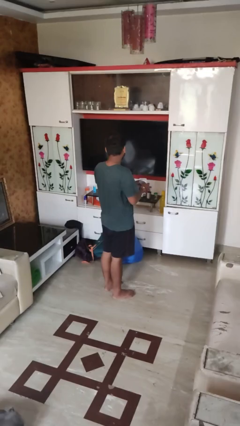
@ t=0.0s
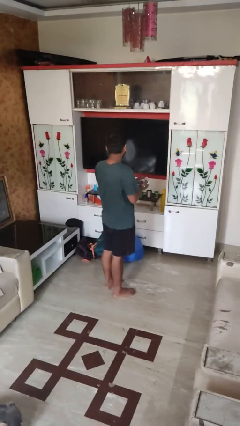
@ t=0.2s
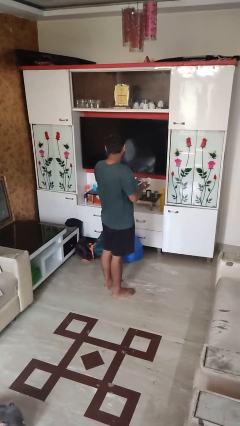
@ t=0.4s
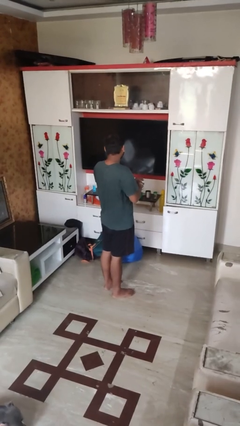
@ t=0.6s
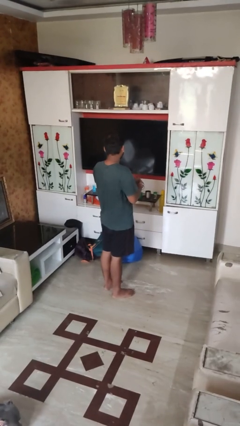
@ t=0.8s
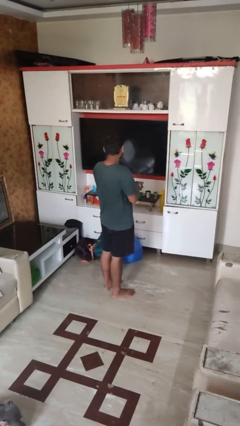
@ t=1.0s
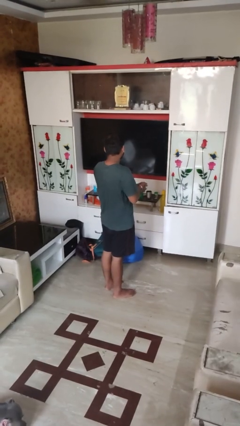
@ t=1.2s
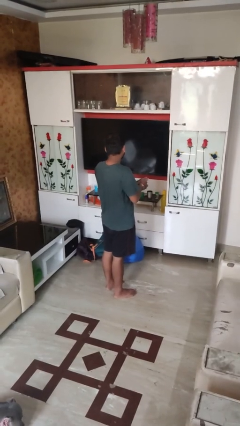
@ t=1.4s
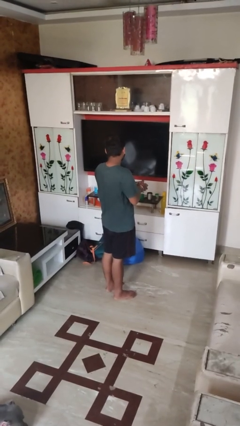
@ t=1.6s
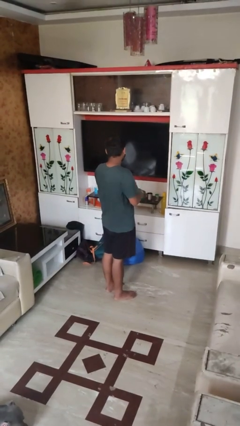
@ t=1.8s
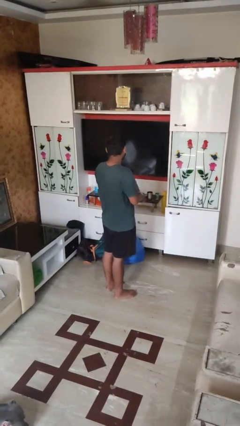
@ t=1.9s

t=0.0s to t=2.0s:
person crumples paper

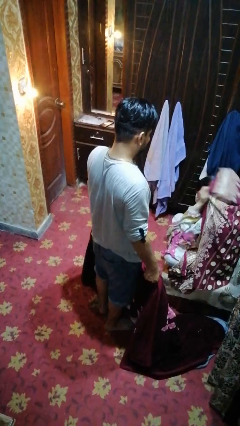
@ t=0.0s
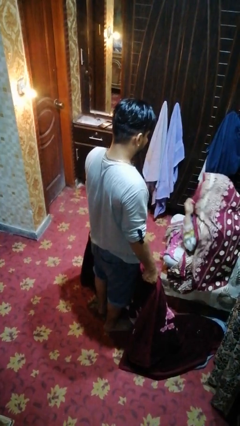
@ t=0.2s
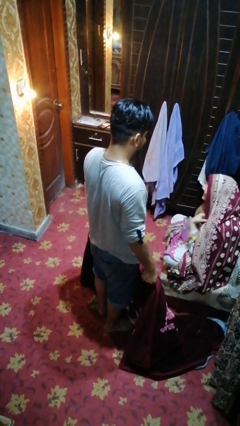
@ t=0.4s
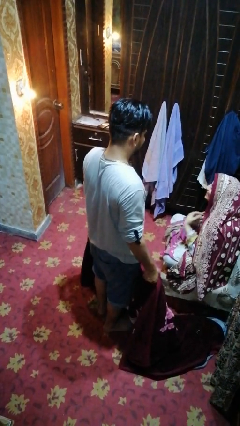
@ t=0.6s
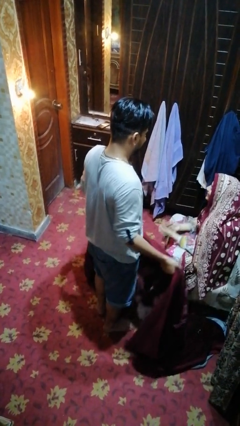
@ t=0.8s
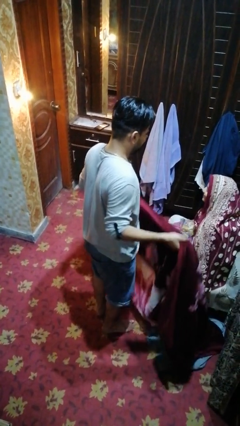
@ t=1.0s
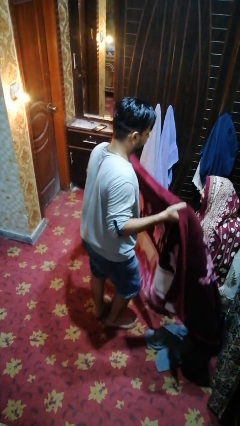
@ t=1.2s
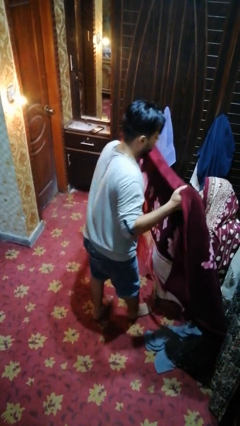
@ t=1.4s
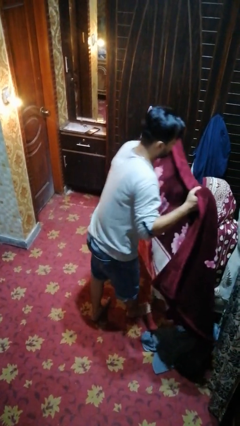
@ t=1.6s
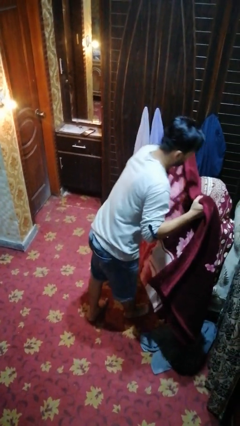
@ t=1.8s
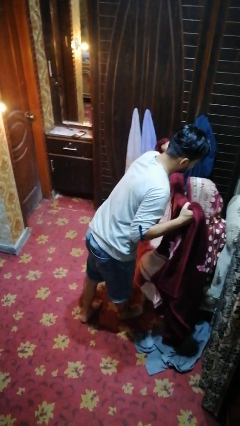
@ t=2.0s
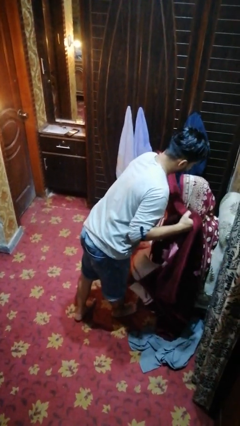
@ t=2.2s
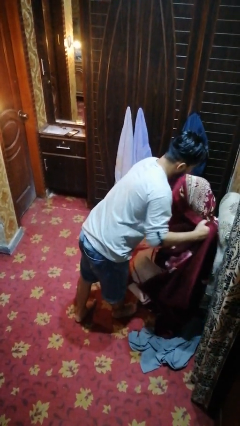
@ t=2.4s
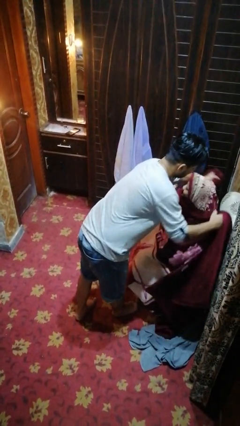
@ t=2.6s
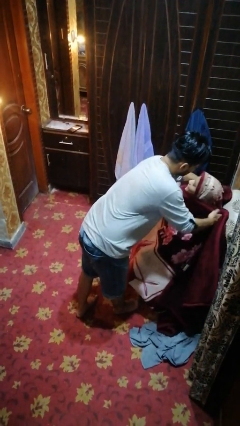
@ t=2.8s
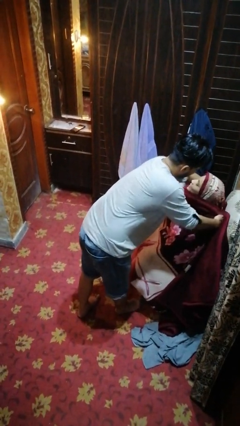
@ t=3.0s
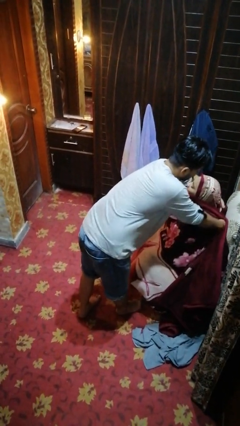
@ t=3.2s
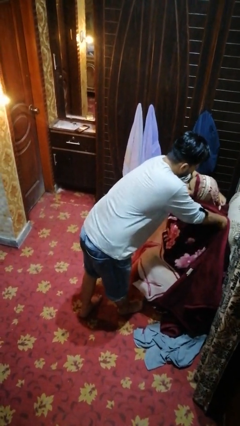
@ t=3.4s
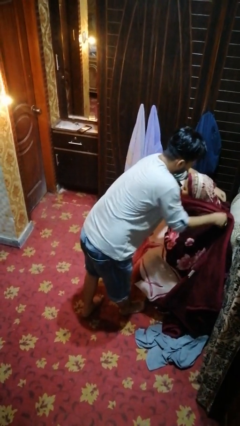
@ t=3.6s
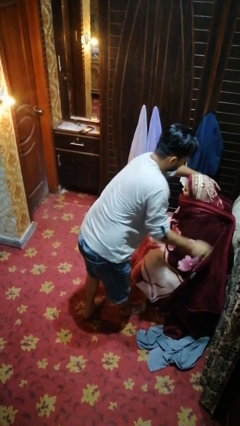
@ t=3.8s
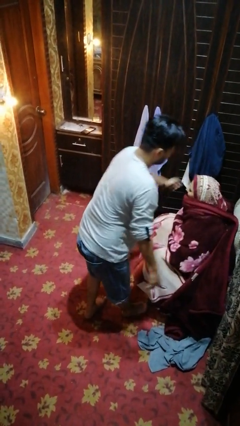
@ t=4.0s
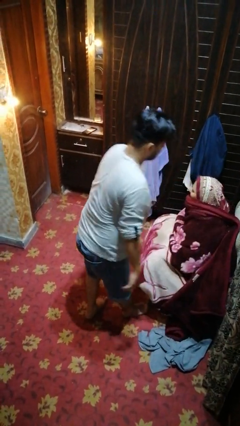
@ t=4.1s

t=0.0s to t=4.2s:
person covers friend with blanket

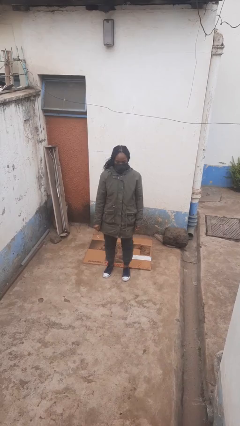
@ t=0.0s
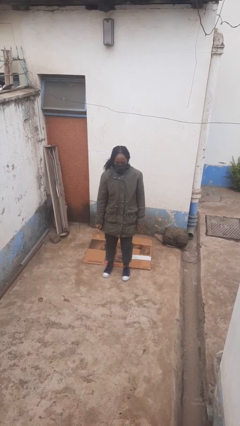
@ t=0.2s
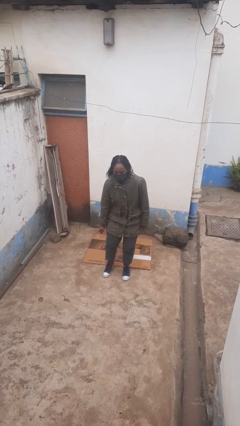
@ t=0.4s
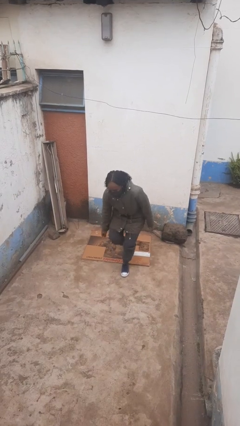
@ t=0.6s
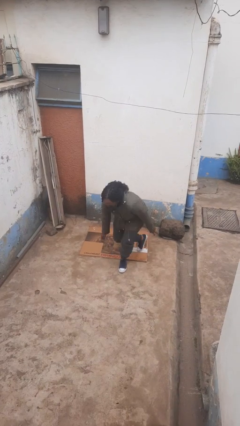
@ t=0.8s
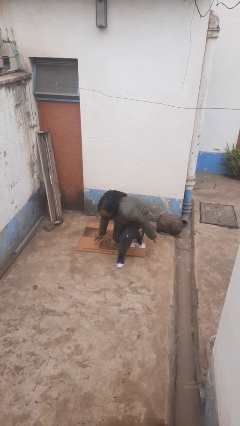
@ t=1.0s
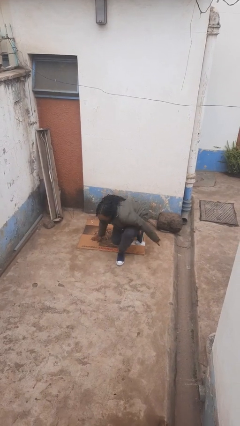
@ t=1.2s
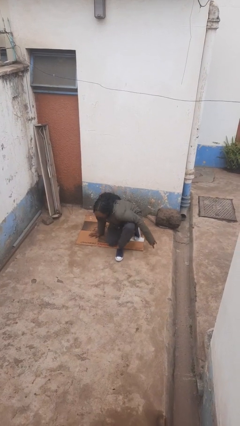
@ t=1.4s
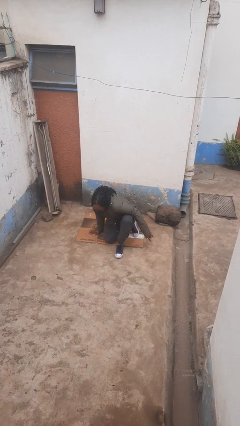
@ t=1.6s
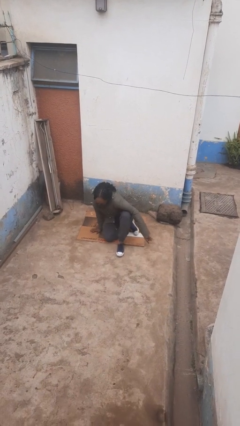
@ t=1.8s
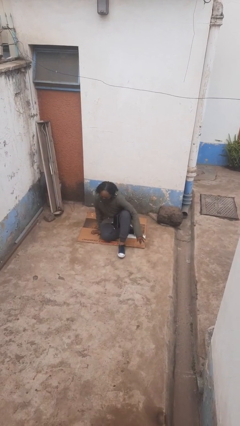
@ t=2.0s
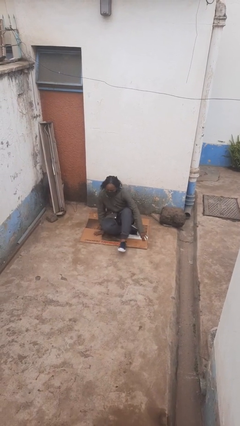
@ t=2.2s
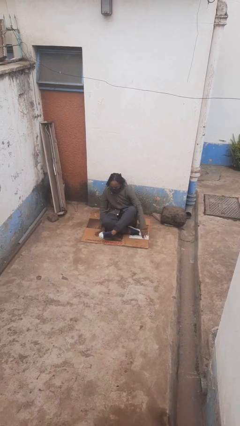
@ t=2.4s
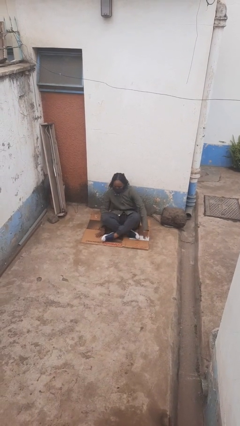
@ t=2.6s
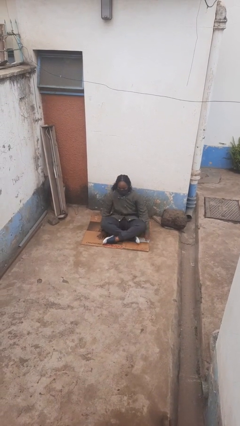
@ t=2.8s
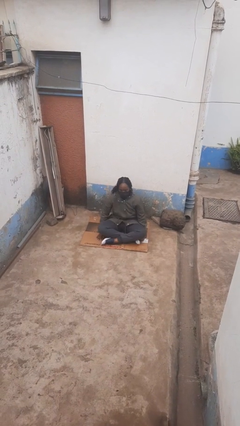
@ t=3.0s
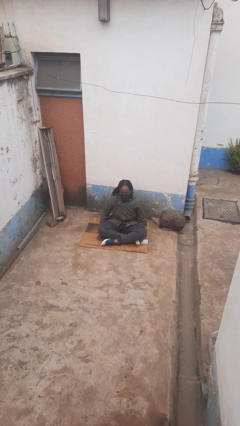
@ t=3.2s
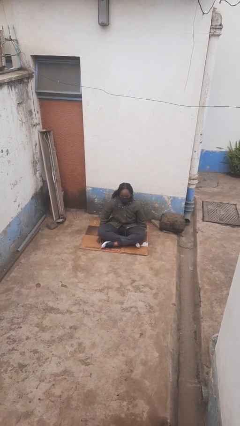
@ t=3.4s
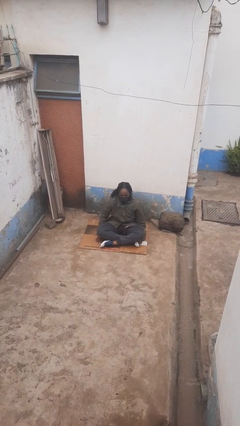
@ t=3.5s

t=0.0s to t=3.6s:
person sits crisscross

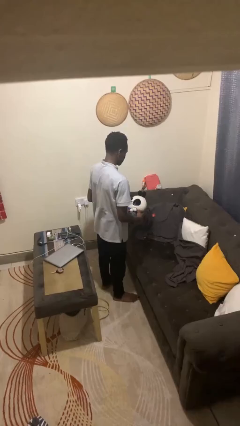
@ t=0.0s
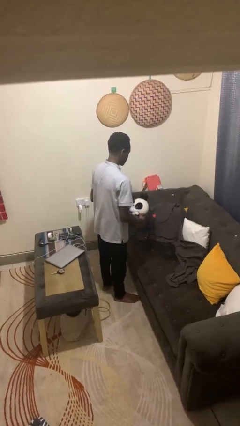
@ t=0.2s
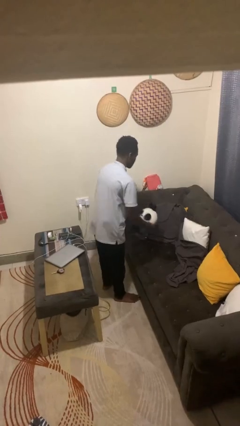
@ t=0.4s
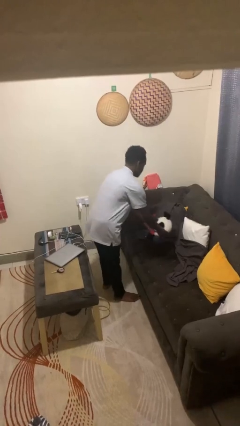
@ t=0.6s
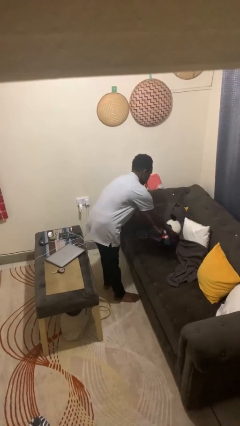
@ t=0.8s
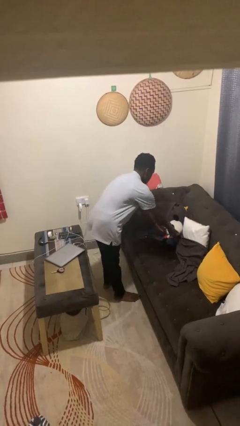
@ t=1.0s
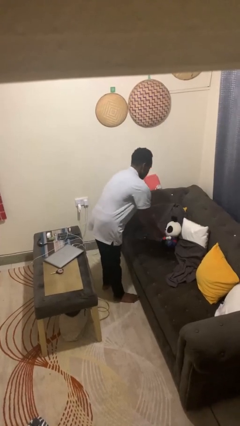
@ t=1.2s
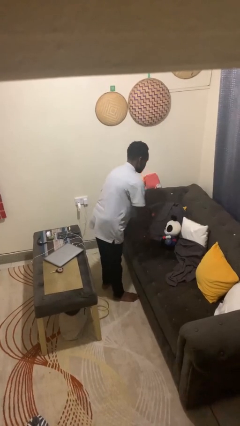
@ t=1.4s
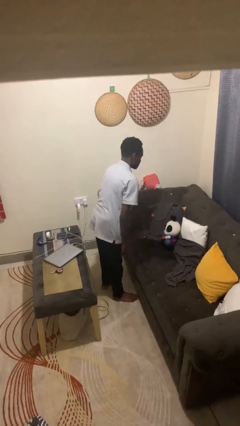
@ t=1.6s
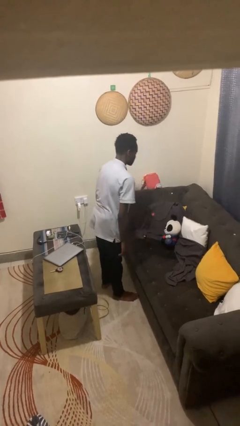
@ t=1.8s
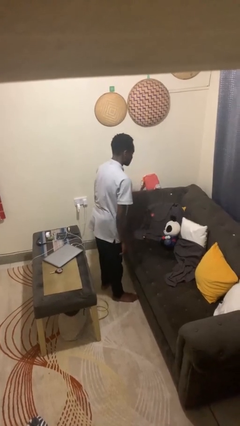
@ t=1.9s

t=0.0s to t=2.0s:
person puts down object on couch

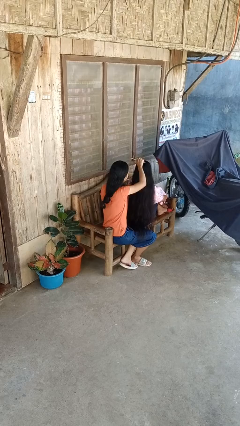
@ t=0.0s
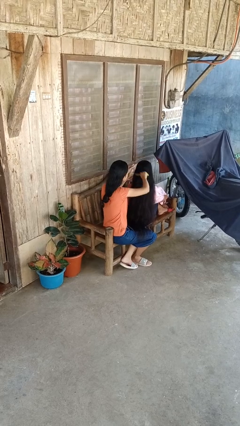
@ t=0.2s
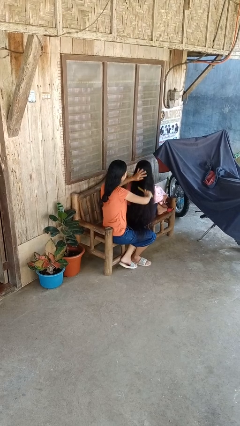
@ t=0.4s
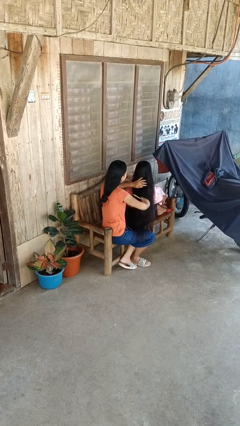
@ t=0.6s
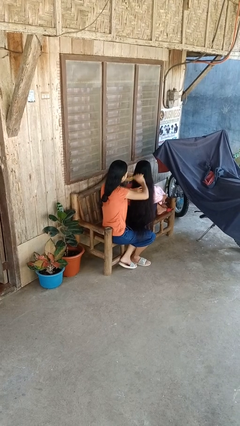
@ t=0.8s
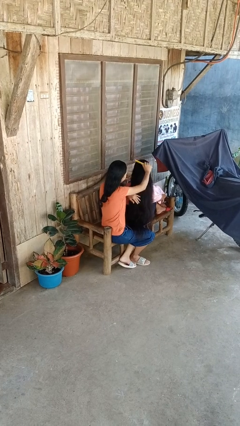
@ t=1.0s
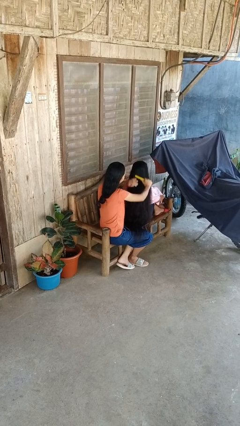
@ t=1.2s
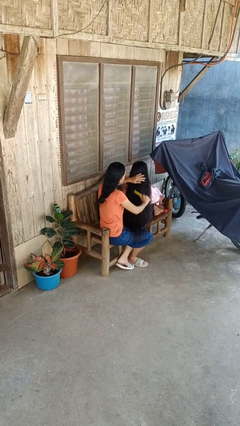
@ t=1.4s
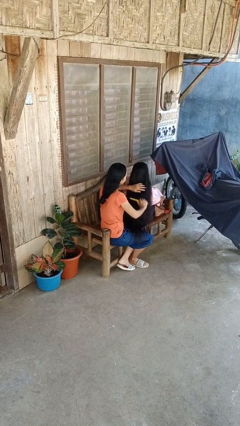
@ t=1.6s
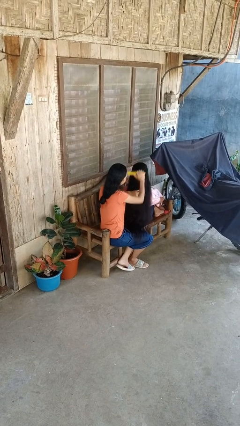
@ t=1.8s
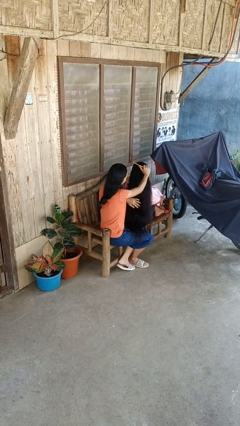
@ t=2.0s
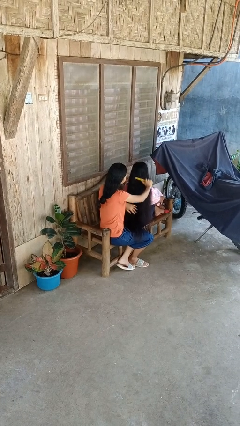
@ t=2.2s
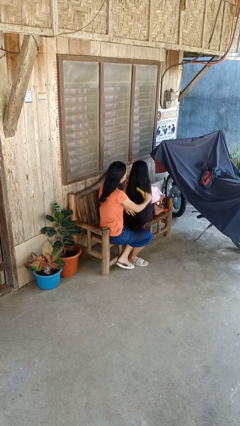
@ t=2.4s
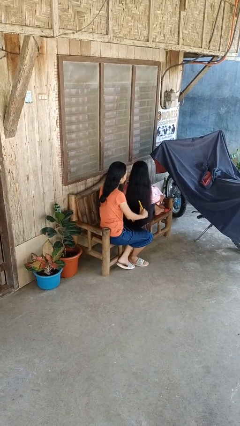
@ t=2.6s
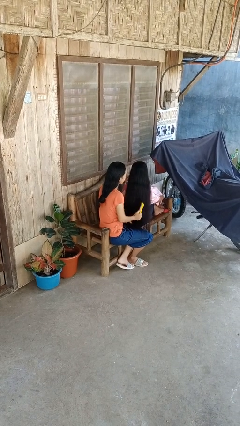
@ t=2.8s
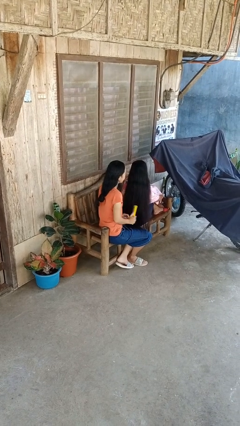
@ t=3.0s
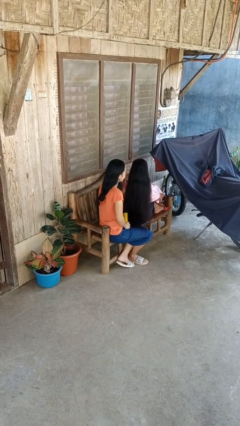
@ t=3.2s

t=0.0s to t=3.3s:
person brushes hair of person

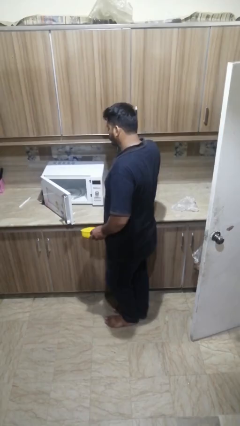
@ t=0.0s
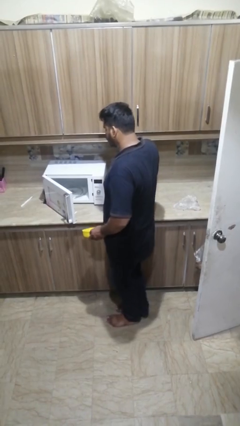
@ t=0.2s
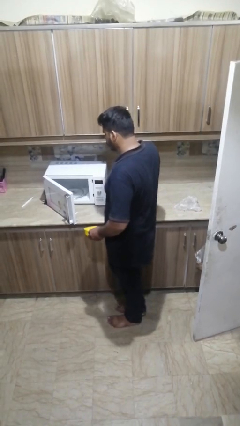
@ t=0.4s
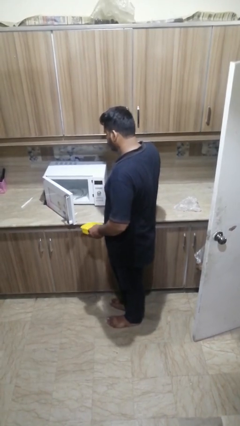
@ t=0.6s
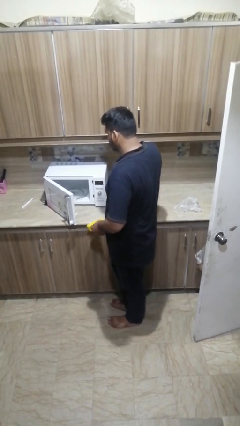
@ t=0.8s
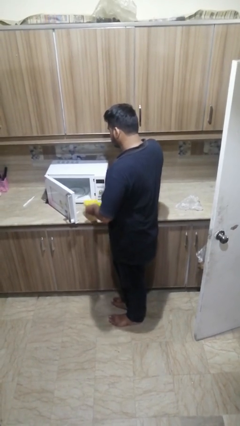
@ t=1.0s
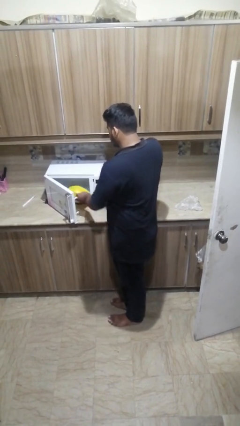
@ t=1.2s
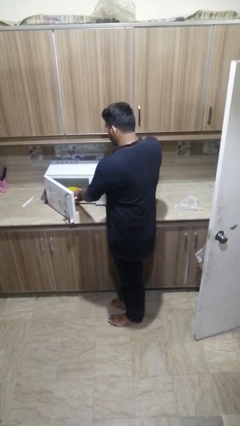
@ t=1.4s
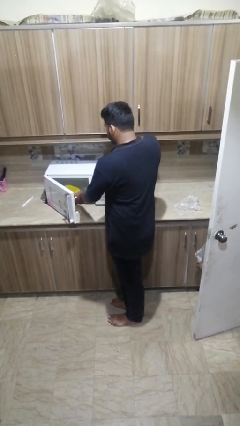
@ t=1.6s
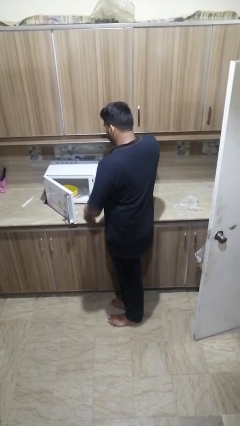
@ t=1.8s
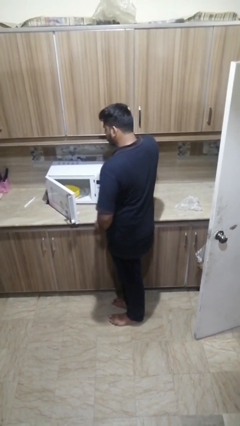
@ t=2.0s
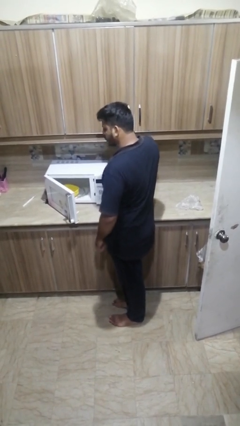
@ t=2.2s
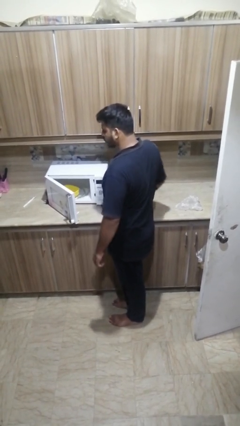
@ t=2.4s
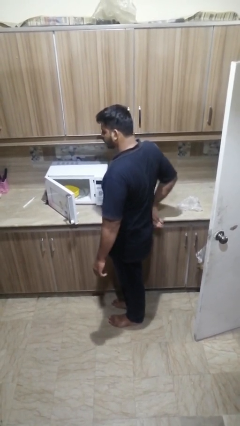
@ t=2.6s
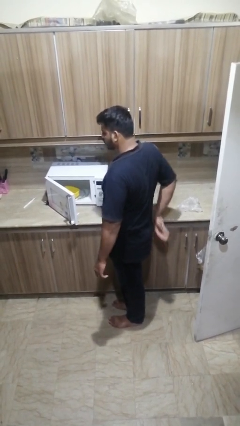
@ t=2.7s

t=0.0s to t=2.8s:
person puts object into microwave
